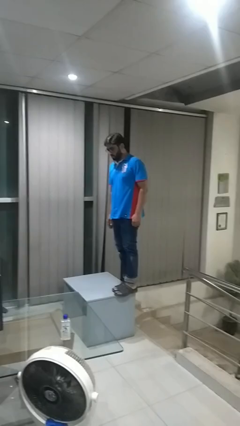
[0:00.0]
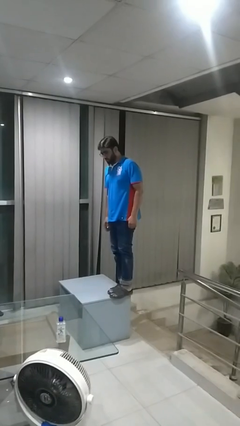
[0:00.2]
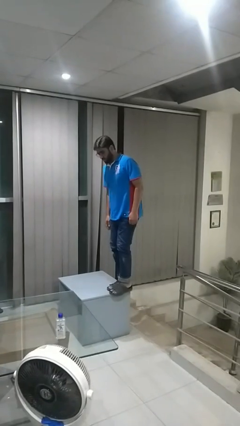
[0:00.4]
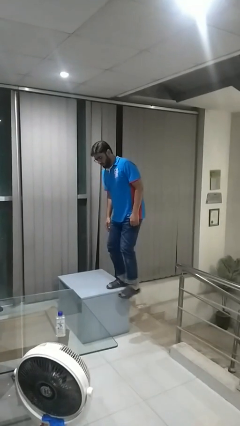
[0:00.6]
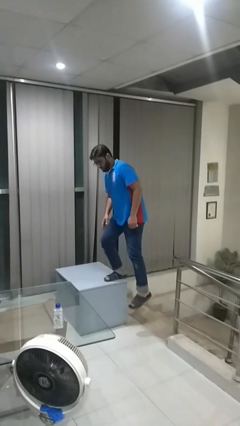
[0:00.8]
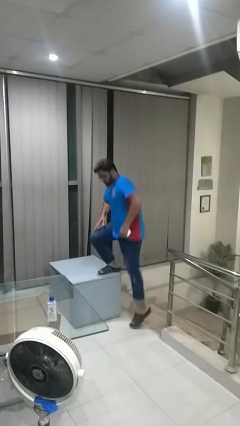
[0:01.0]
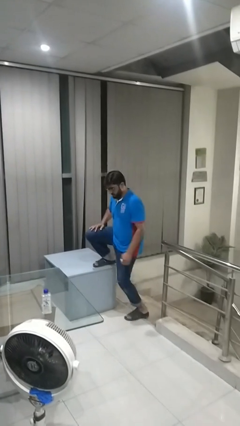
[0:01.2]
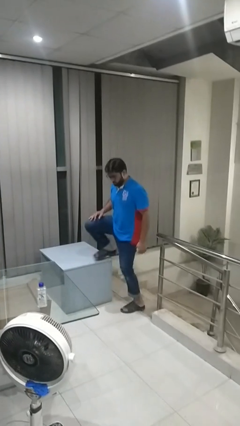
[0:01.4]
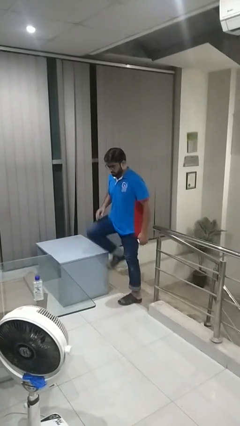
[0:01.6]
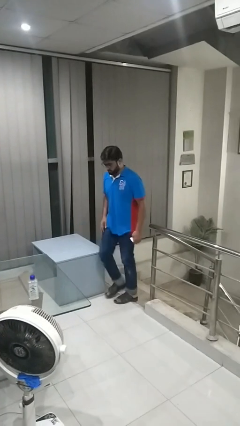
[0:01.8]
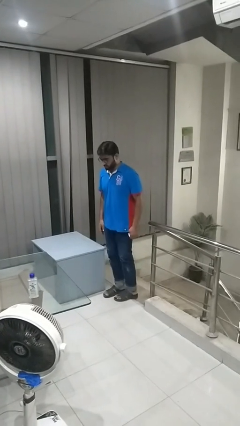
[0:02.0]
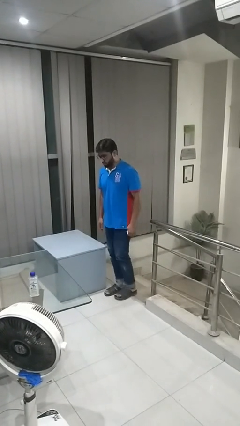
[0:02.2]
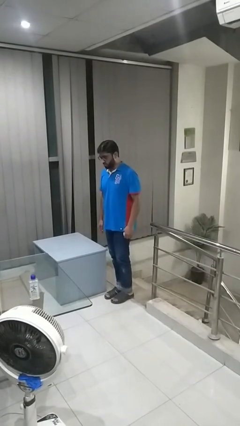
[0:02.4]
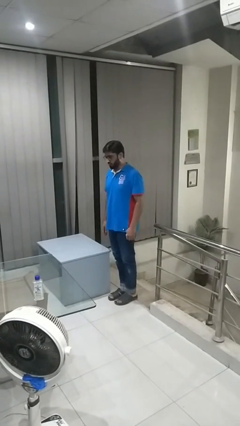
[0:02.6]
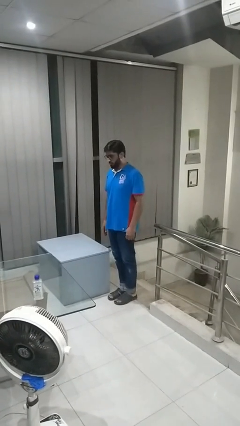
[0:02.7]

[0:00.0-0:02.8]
person climbs off table

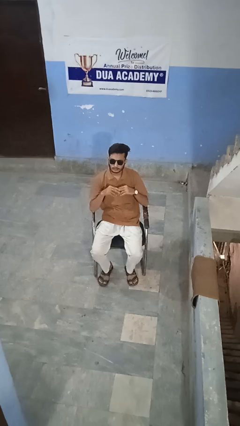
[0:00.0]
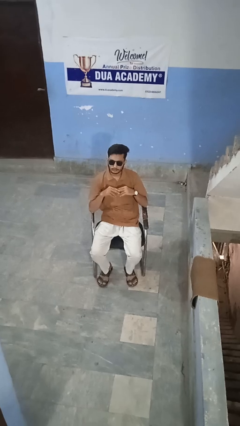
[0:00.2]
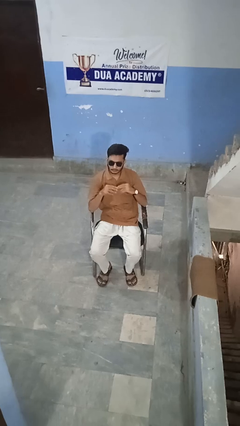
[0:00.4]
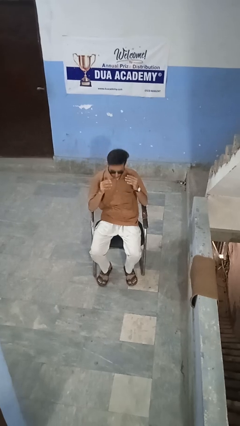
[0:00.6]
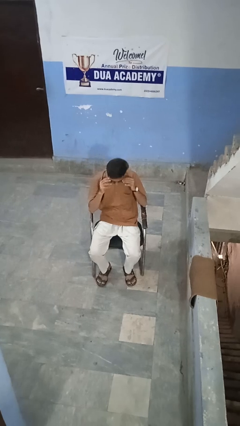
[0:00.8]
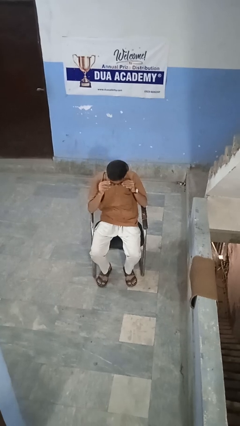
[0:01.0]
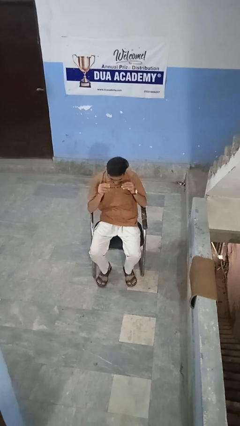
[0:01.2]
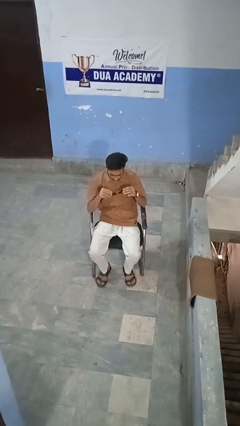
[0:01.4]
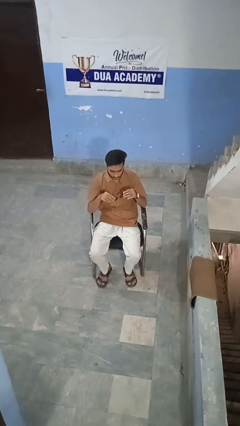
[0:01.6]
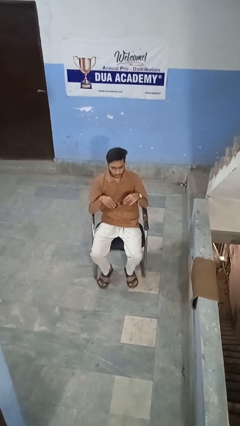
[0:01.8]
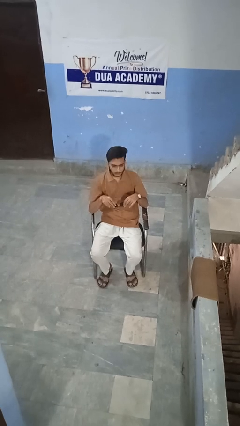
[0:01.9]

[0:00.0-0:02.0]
person takes off sunglasses

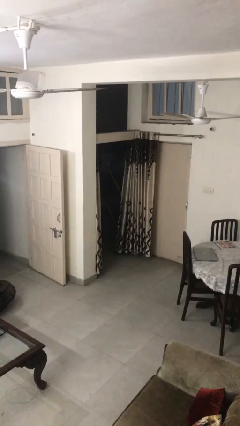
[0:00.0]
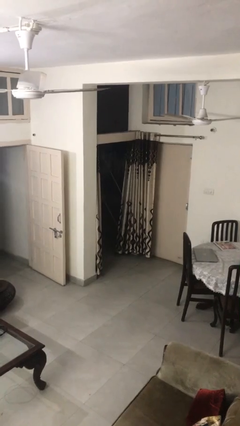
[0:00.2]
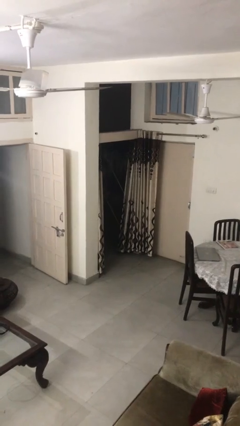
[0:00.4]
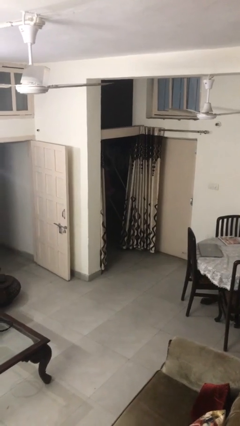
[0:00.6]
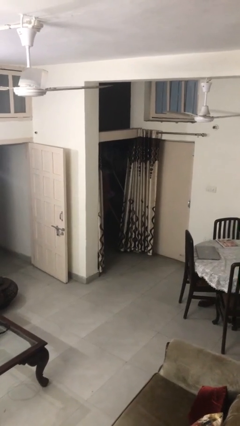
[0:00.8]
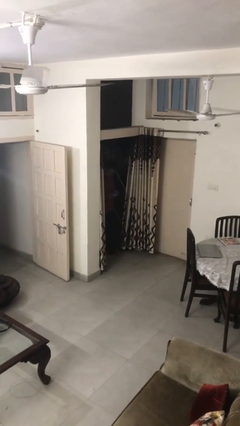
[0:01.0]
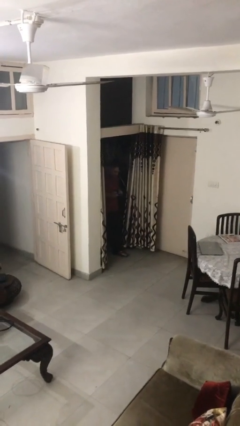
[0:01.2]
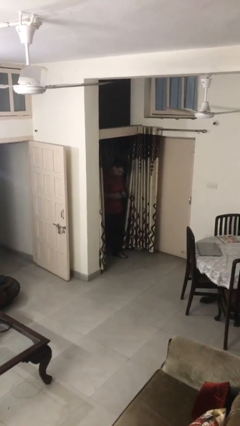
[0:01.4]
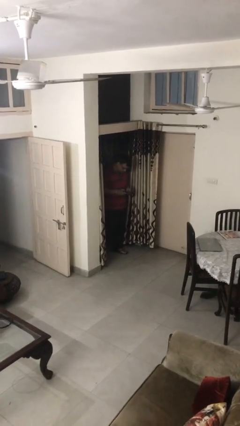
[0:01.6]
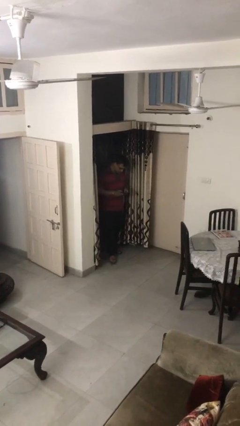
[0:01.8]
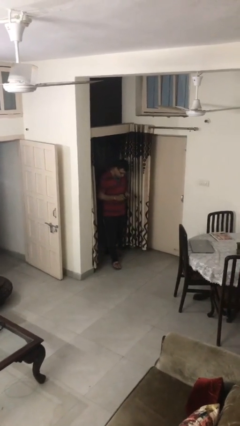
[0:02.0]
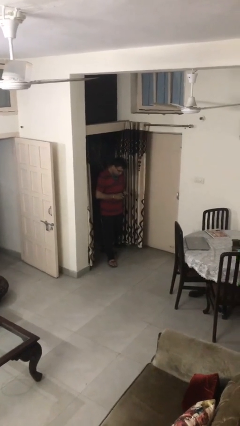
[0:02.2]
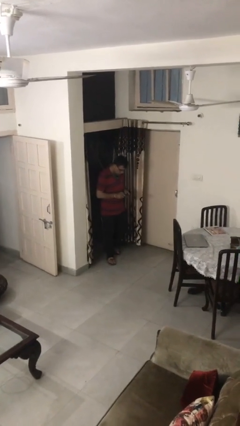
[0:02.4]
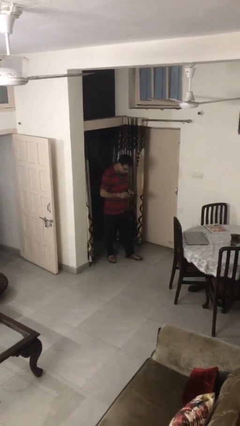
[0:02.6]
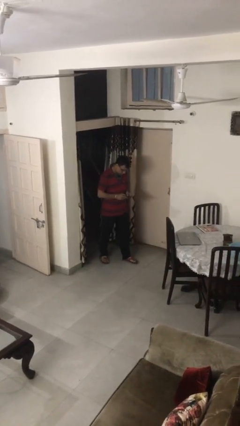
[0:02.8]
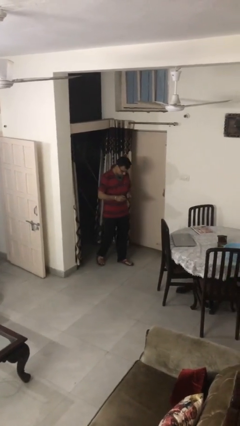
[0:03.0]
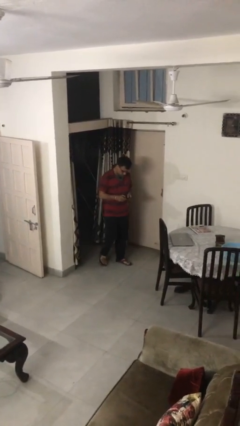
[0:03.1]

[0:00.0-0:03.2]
person enters scene through structure

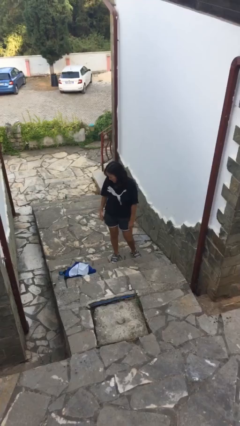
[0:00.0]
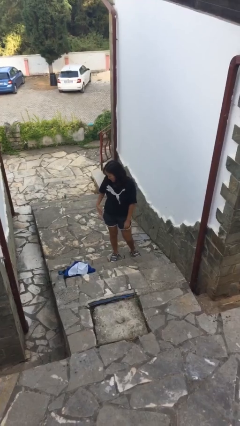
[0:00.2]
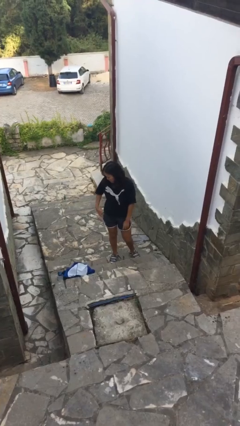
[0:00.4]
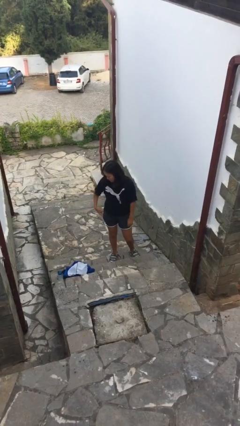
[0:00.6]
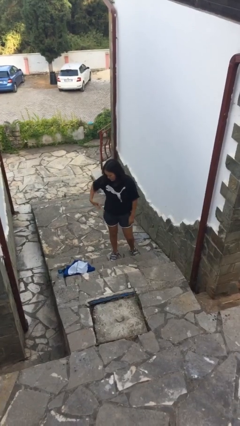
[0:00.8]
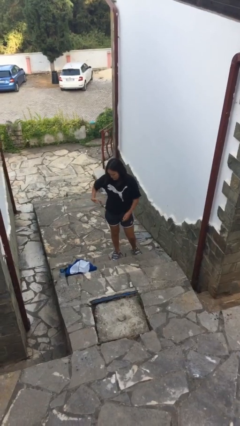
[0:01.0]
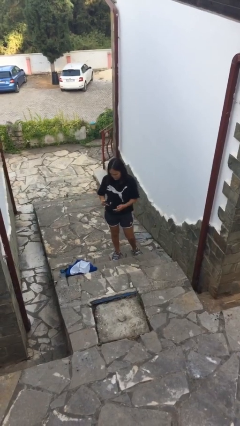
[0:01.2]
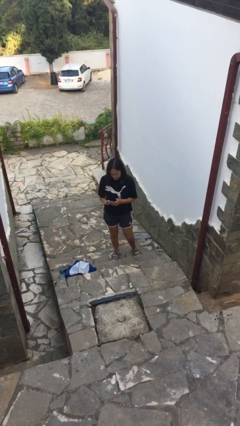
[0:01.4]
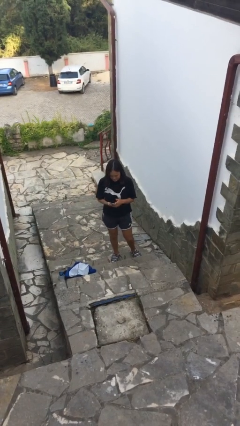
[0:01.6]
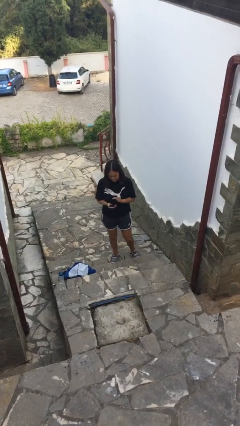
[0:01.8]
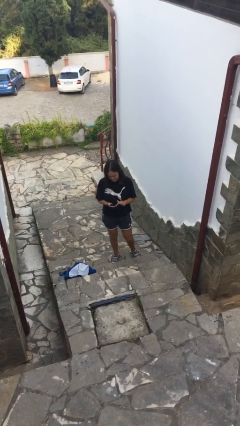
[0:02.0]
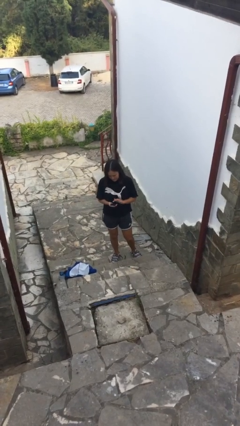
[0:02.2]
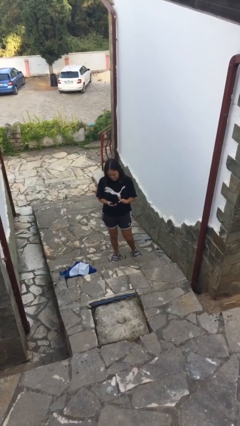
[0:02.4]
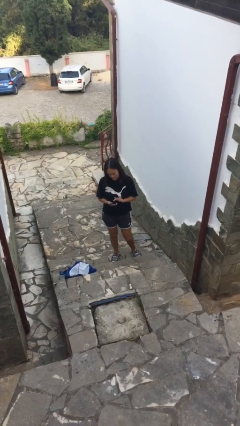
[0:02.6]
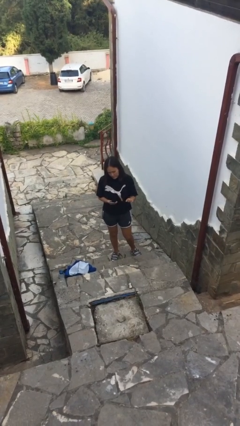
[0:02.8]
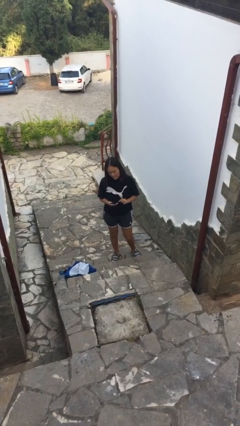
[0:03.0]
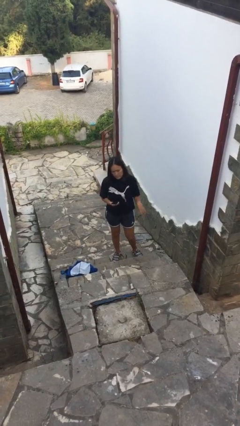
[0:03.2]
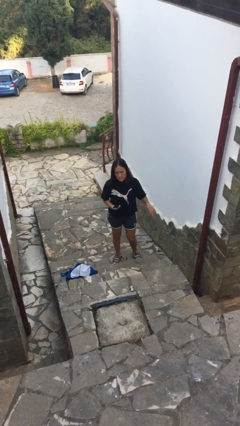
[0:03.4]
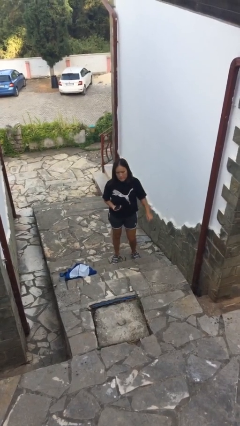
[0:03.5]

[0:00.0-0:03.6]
person takes phone from pocket

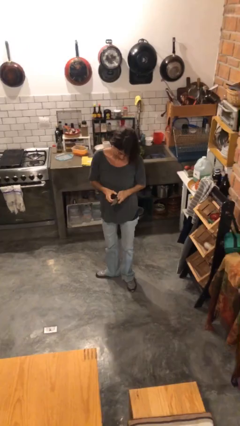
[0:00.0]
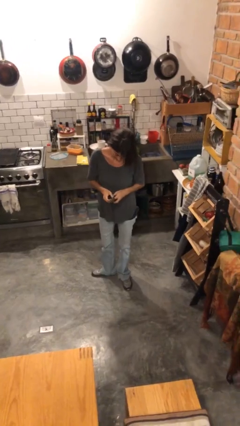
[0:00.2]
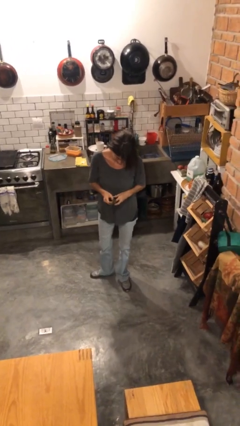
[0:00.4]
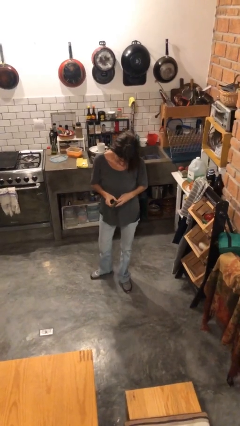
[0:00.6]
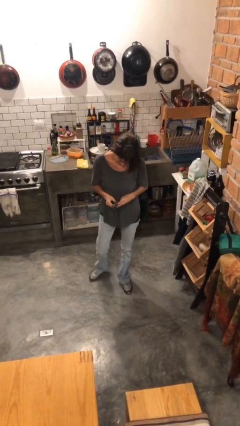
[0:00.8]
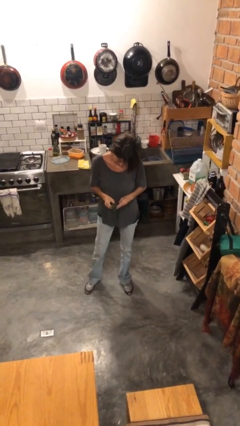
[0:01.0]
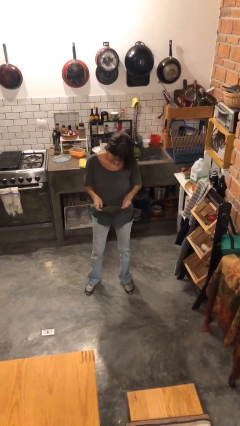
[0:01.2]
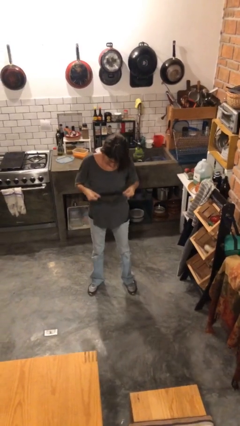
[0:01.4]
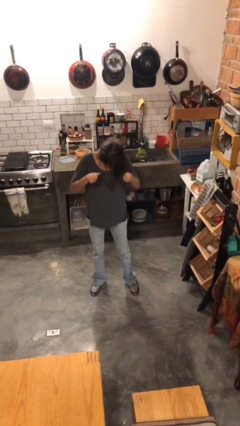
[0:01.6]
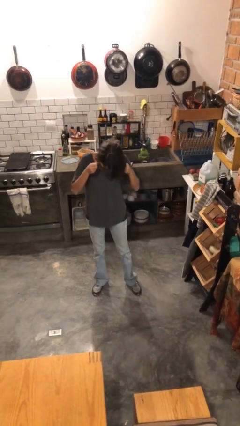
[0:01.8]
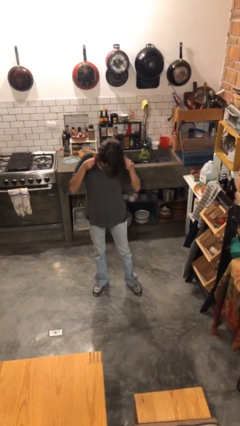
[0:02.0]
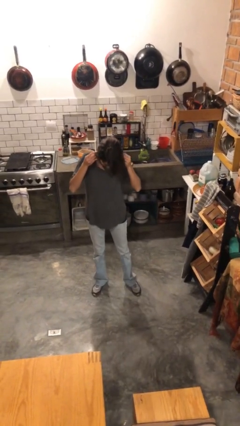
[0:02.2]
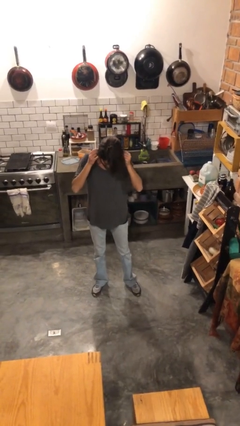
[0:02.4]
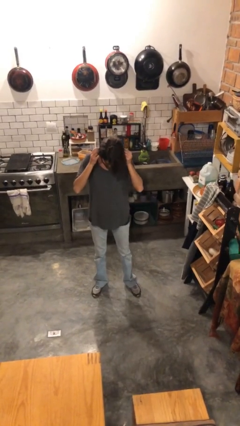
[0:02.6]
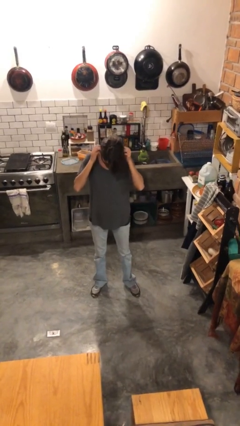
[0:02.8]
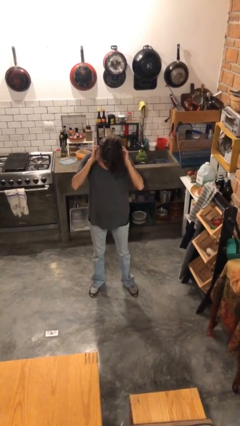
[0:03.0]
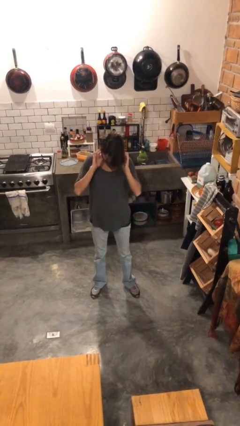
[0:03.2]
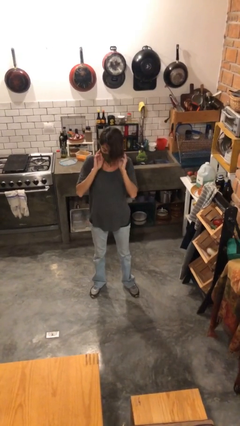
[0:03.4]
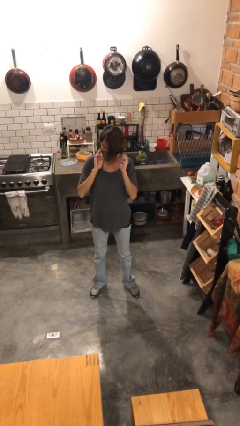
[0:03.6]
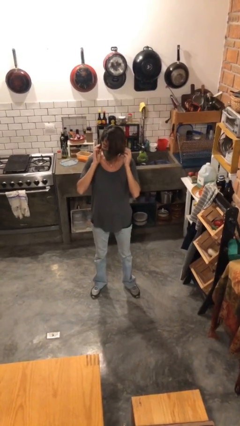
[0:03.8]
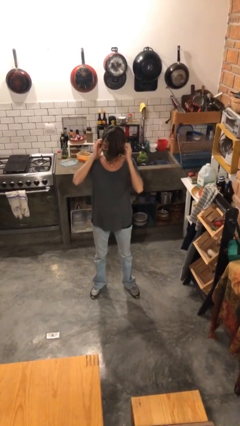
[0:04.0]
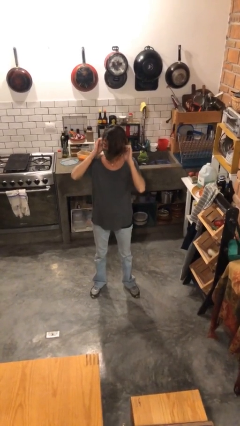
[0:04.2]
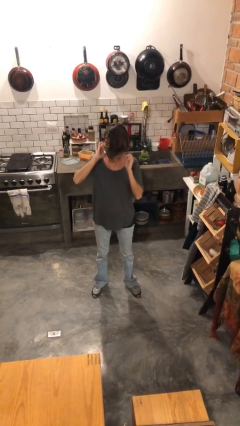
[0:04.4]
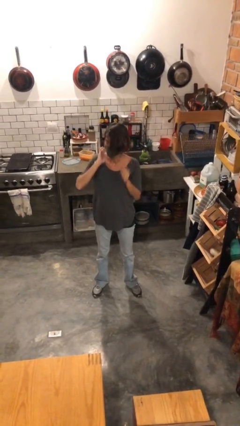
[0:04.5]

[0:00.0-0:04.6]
person puts on facemask

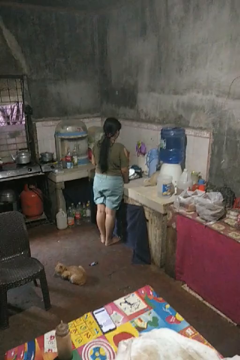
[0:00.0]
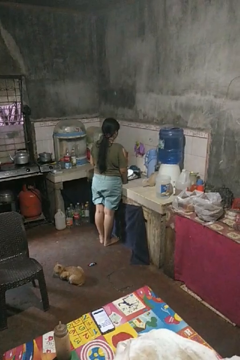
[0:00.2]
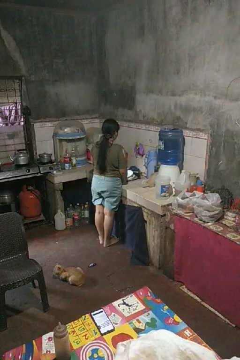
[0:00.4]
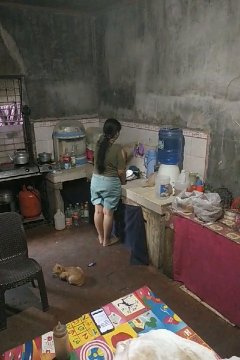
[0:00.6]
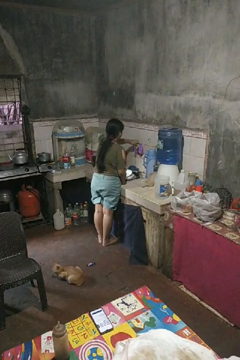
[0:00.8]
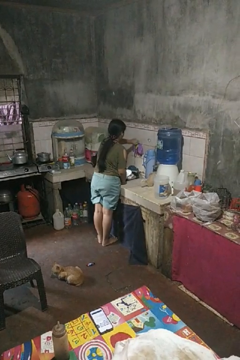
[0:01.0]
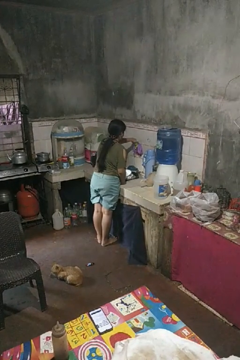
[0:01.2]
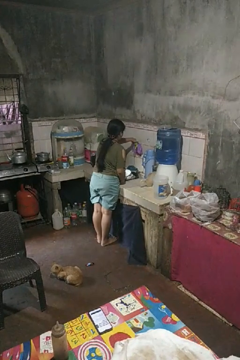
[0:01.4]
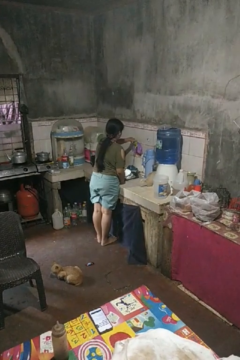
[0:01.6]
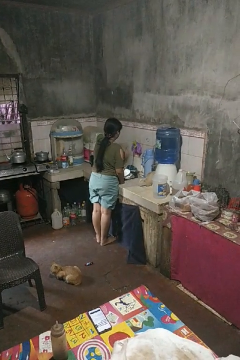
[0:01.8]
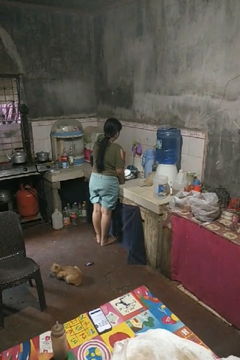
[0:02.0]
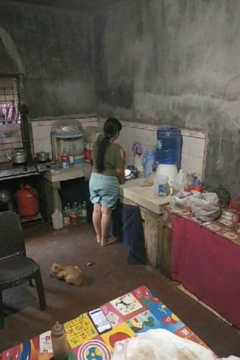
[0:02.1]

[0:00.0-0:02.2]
person turns on faucet
